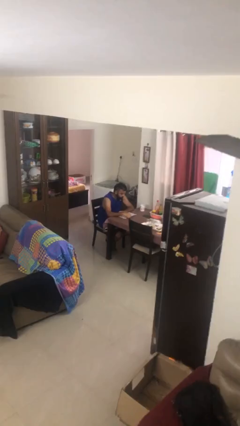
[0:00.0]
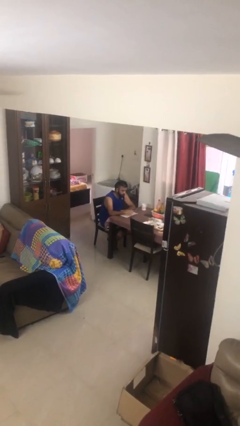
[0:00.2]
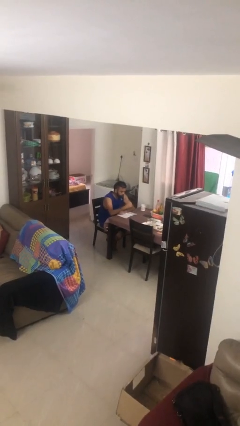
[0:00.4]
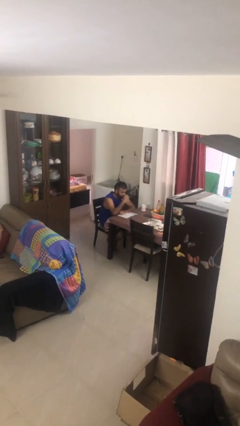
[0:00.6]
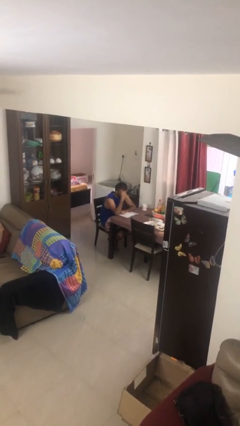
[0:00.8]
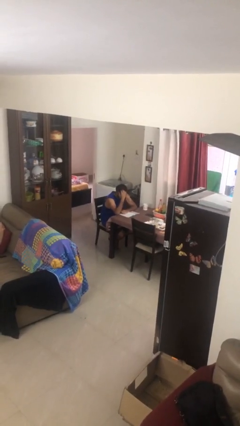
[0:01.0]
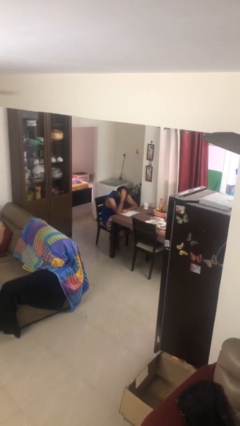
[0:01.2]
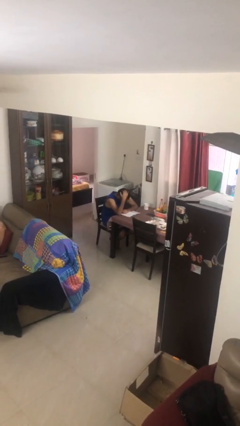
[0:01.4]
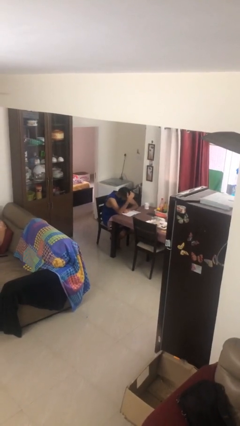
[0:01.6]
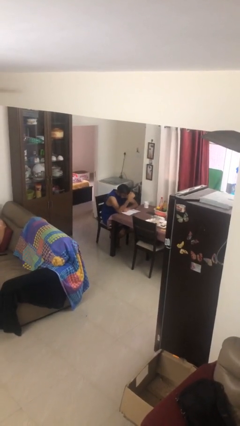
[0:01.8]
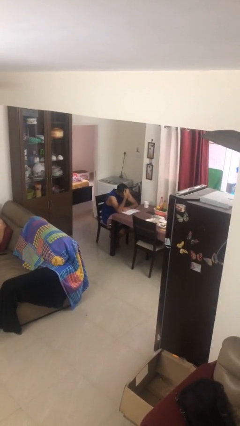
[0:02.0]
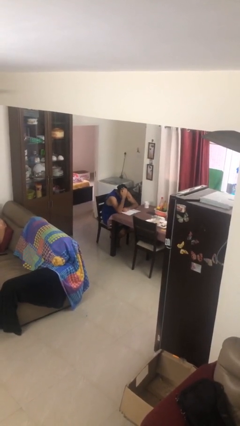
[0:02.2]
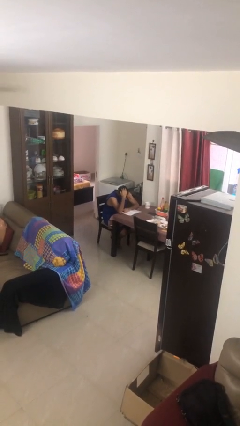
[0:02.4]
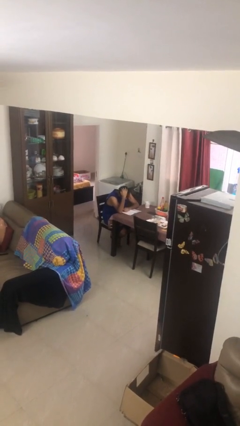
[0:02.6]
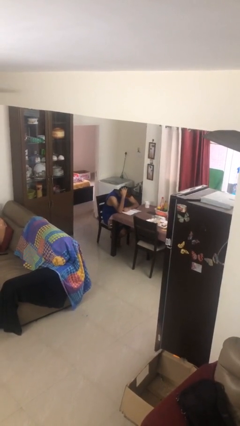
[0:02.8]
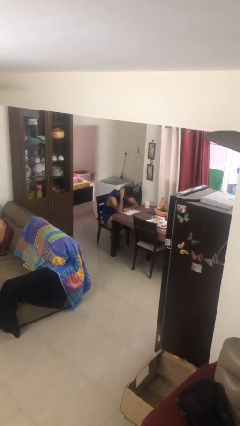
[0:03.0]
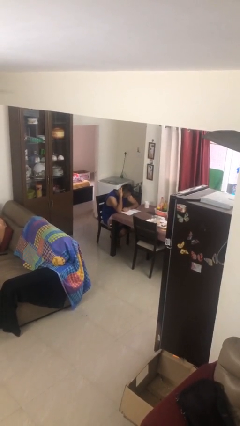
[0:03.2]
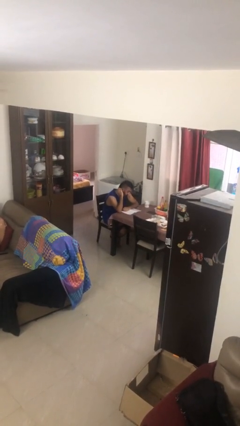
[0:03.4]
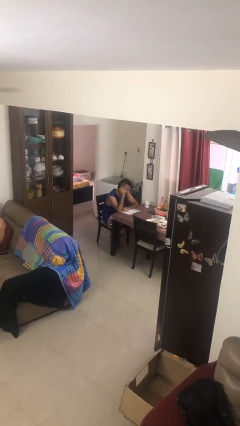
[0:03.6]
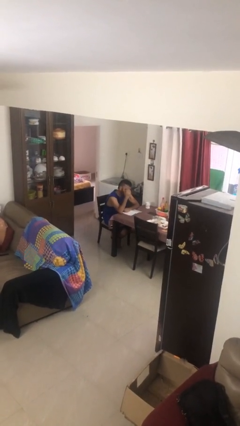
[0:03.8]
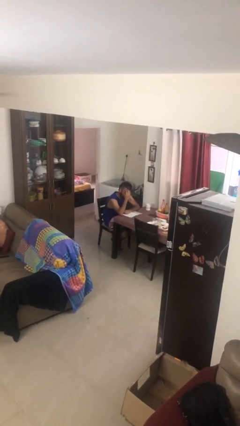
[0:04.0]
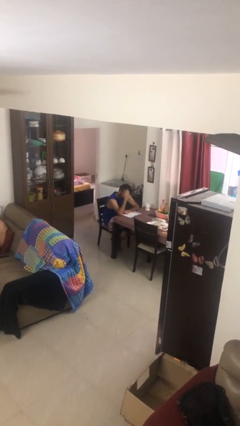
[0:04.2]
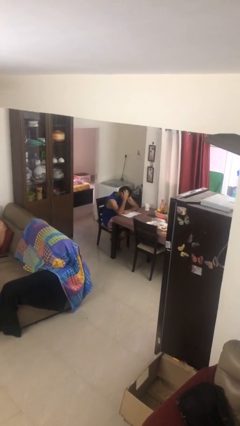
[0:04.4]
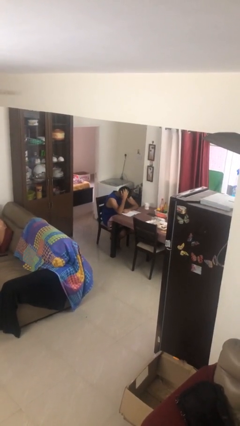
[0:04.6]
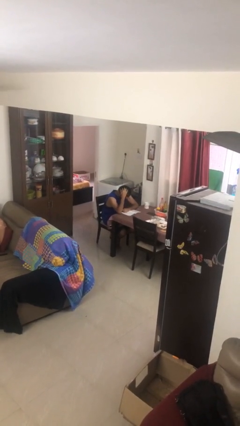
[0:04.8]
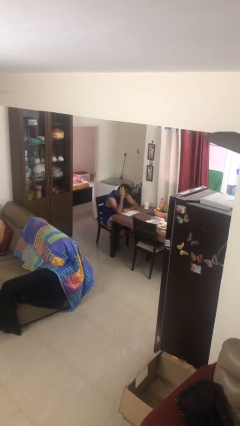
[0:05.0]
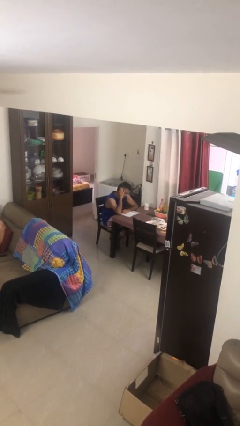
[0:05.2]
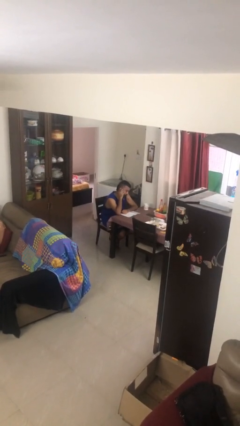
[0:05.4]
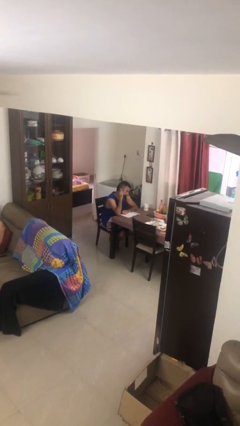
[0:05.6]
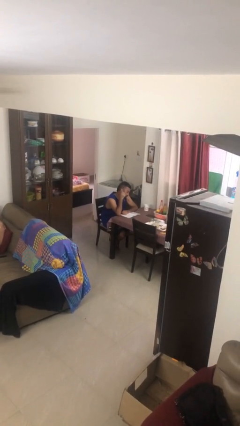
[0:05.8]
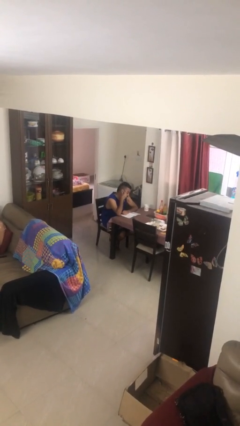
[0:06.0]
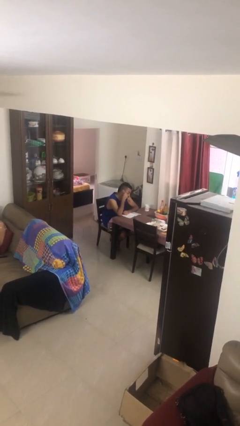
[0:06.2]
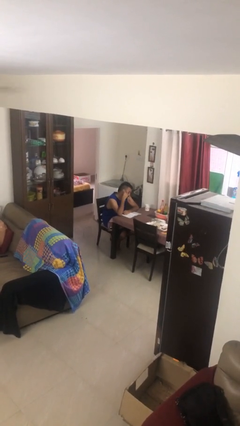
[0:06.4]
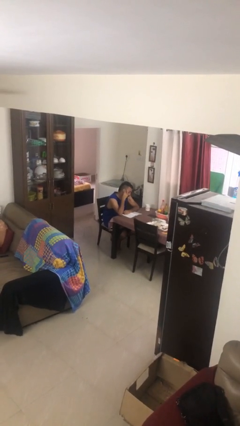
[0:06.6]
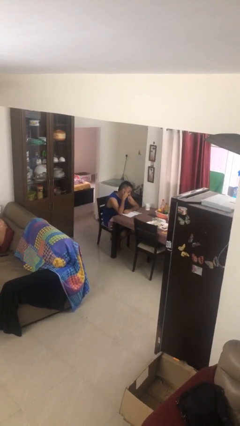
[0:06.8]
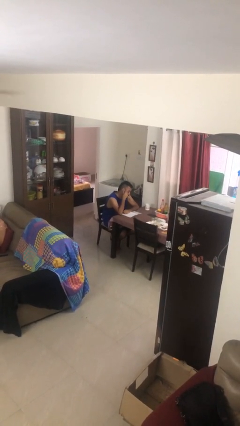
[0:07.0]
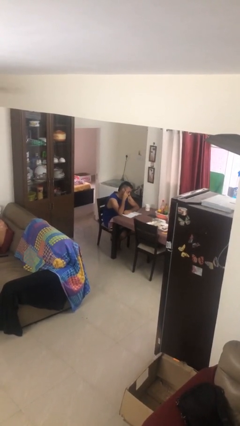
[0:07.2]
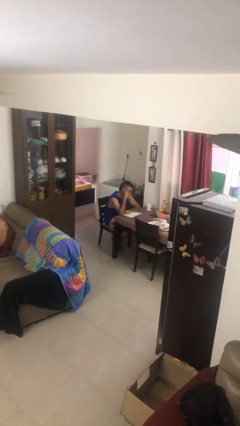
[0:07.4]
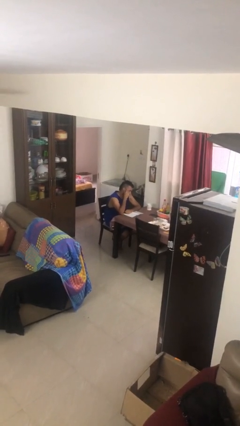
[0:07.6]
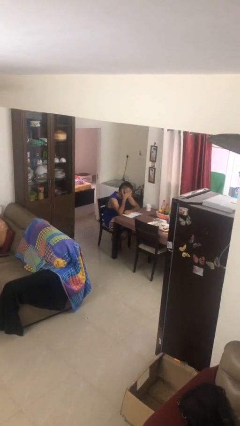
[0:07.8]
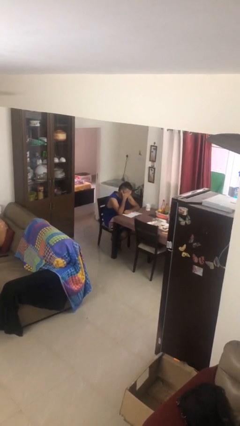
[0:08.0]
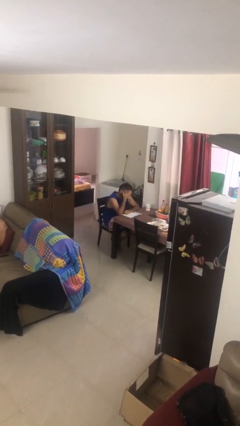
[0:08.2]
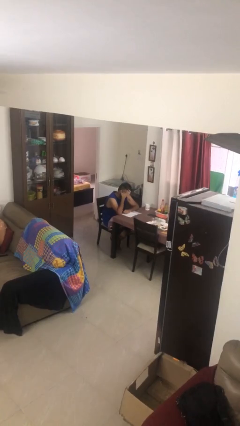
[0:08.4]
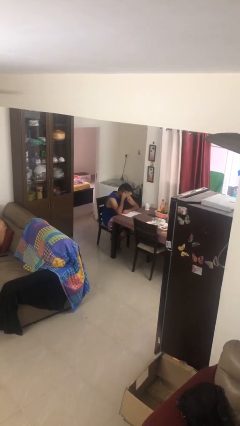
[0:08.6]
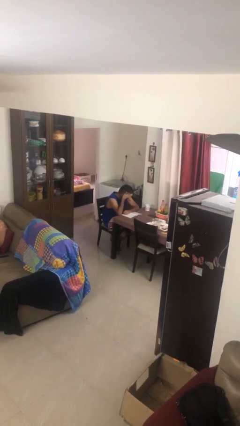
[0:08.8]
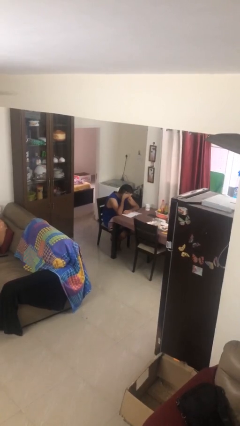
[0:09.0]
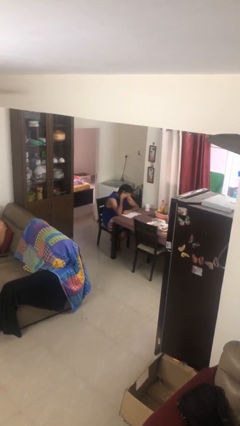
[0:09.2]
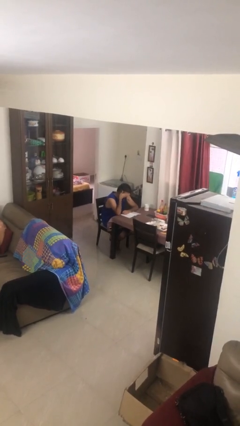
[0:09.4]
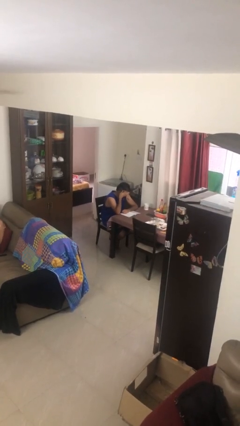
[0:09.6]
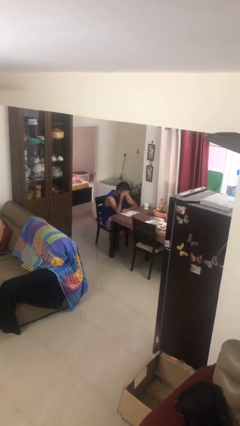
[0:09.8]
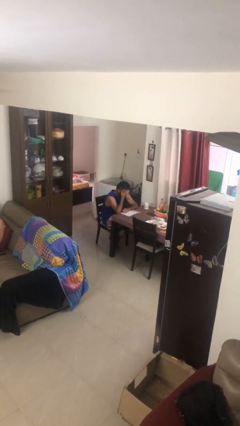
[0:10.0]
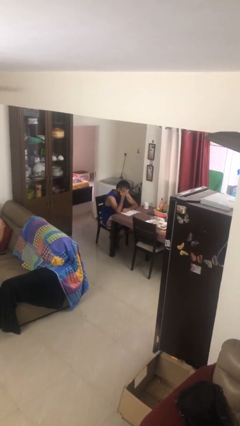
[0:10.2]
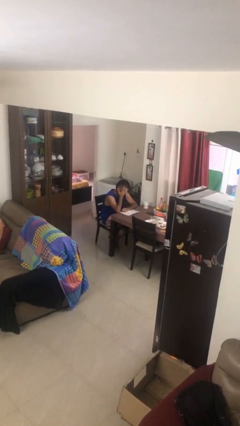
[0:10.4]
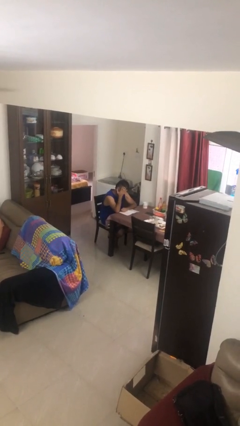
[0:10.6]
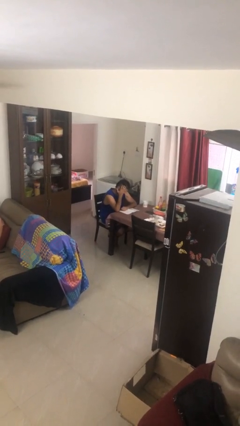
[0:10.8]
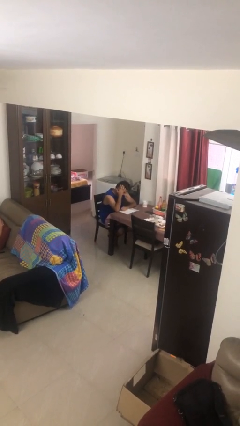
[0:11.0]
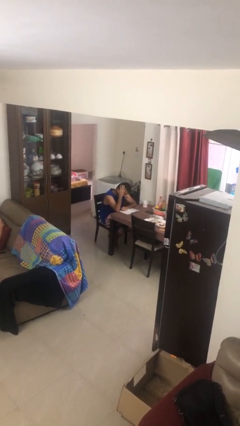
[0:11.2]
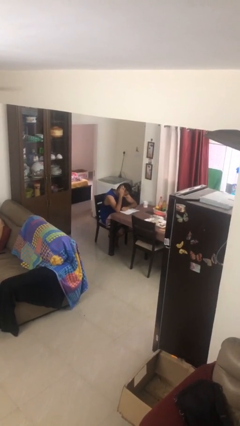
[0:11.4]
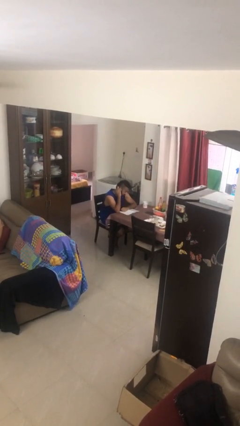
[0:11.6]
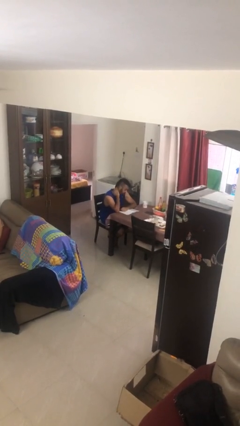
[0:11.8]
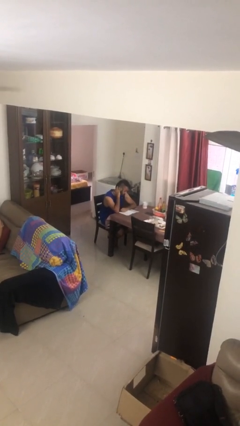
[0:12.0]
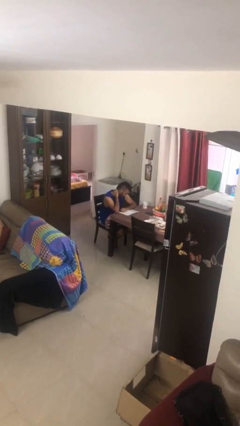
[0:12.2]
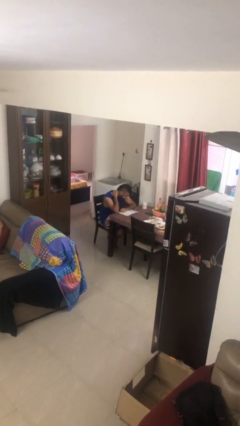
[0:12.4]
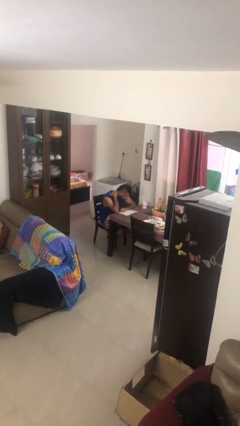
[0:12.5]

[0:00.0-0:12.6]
person reads document

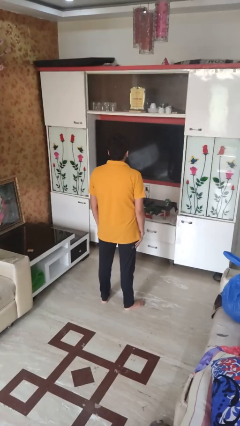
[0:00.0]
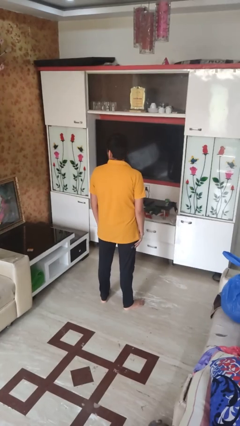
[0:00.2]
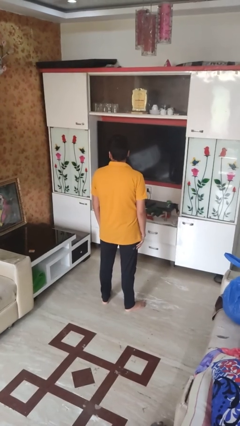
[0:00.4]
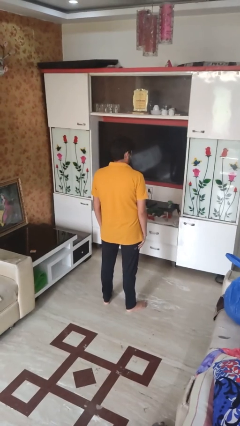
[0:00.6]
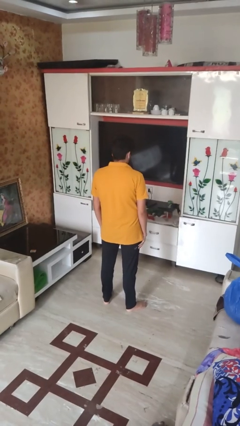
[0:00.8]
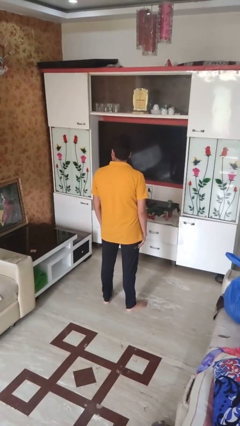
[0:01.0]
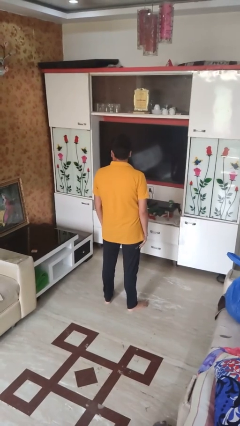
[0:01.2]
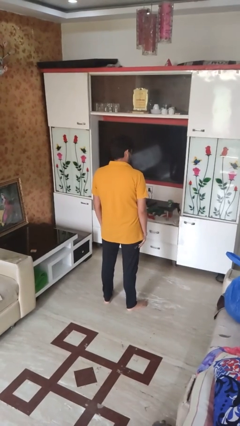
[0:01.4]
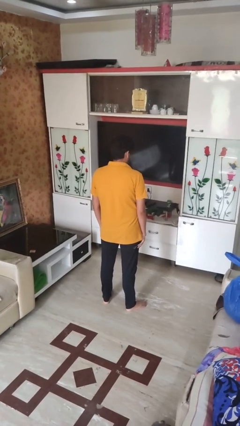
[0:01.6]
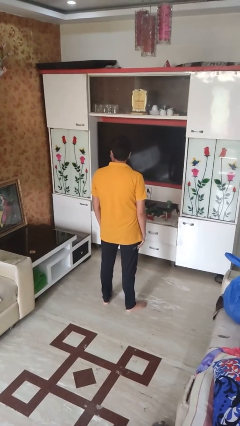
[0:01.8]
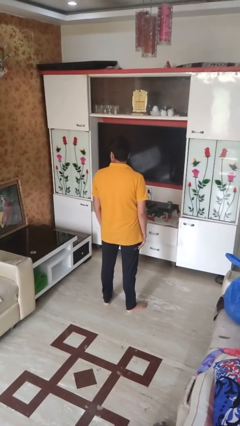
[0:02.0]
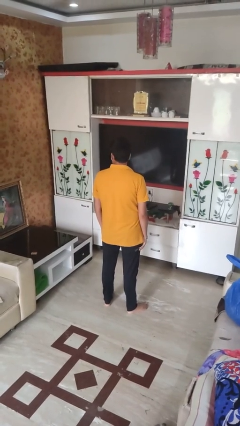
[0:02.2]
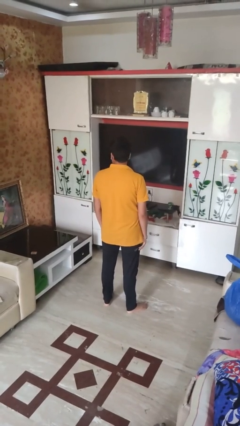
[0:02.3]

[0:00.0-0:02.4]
person shakes head

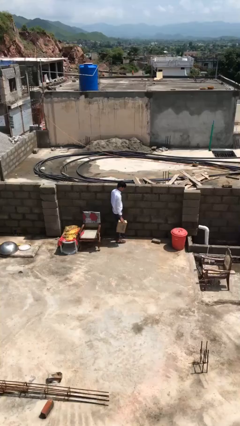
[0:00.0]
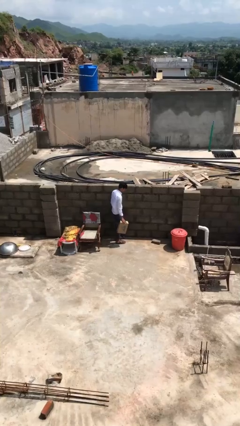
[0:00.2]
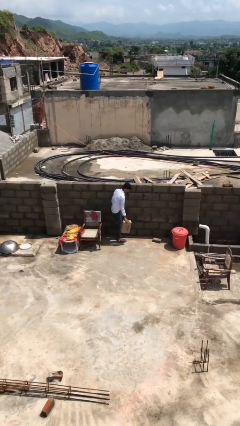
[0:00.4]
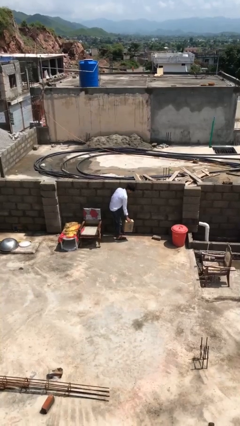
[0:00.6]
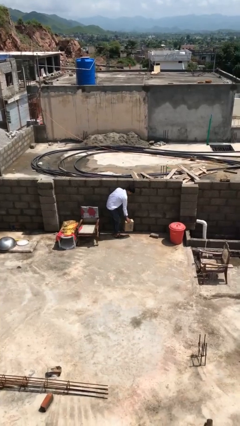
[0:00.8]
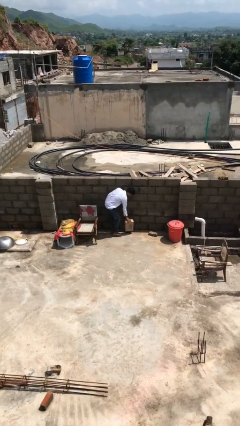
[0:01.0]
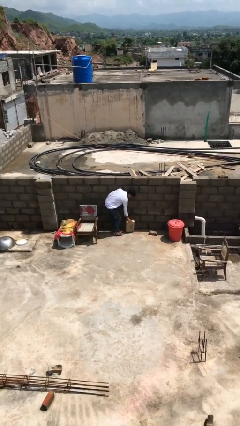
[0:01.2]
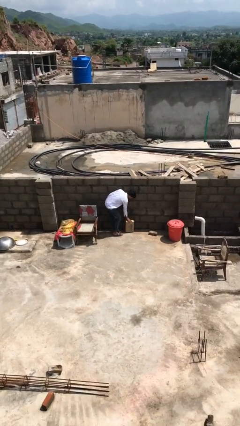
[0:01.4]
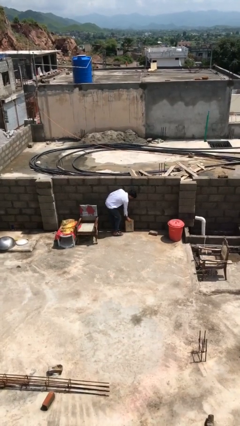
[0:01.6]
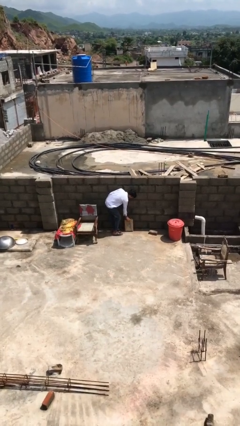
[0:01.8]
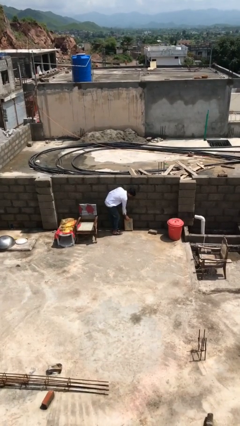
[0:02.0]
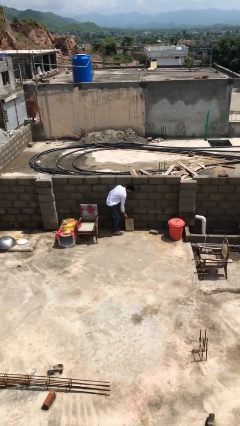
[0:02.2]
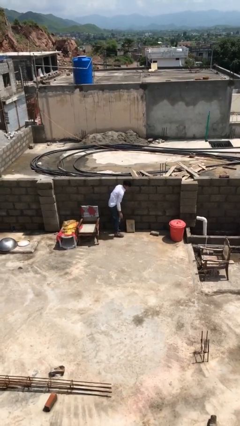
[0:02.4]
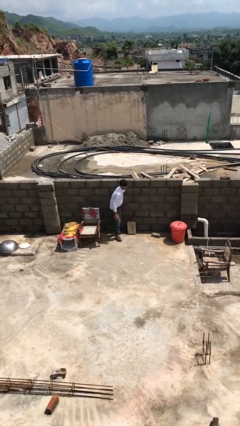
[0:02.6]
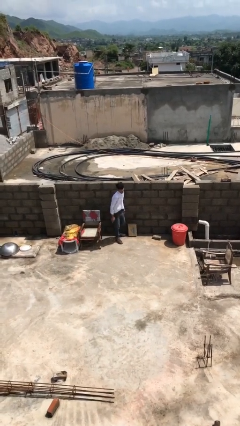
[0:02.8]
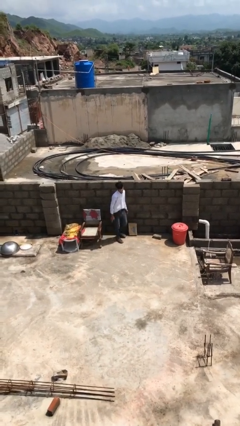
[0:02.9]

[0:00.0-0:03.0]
person puts down object on floor

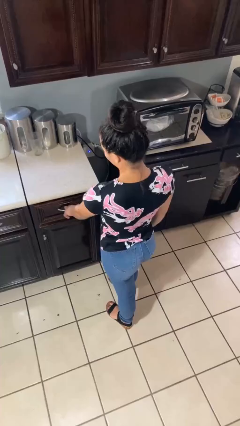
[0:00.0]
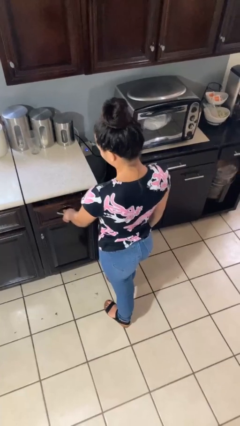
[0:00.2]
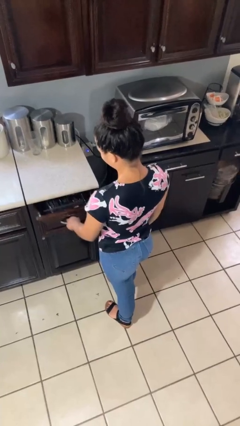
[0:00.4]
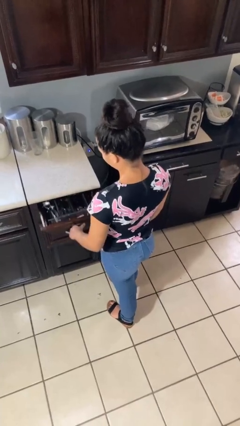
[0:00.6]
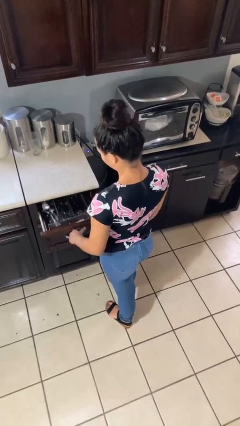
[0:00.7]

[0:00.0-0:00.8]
person opens kitchen drawer
